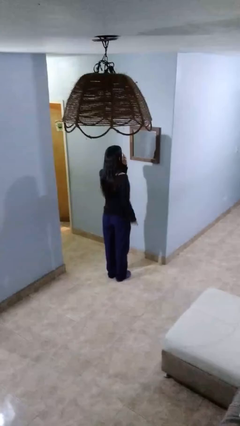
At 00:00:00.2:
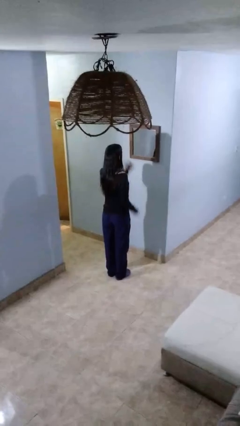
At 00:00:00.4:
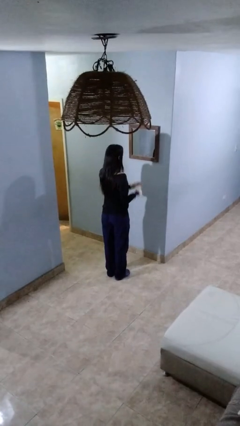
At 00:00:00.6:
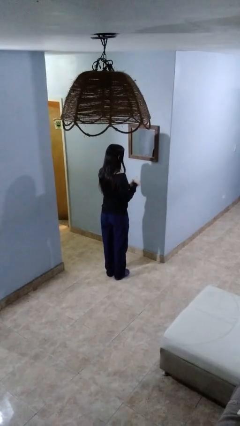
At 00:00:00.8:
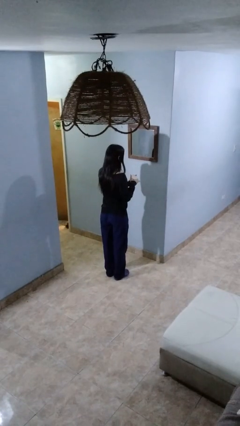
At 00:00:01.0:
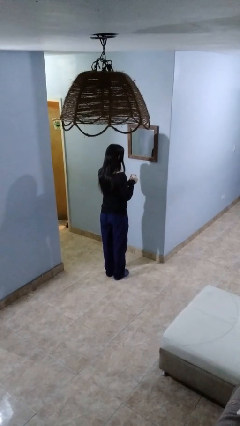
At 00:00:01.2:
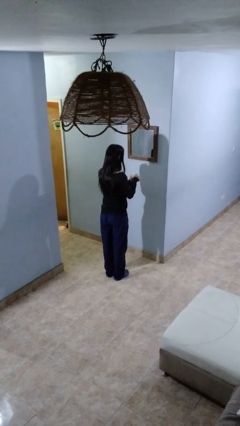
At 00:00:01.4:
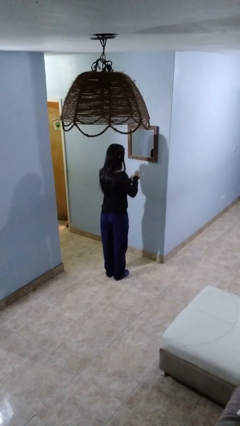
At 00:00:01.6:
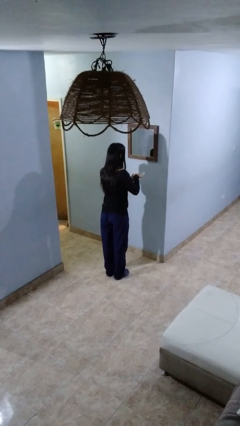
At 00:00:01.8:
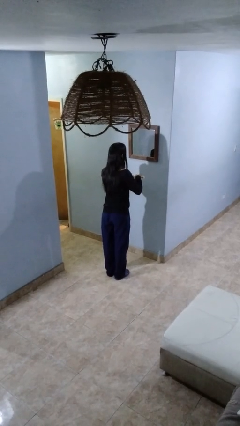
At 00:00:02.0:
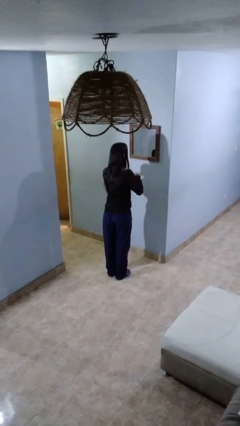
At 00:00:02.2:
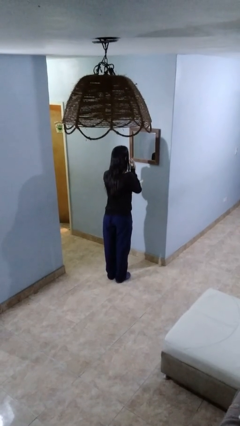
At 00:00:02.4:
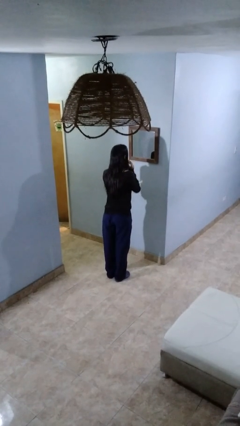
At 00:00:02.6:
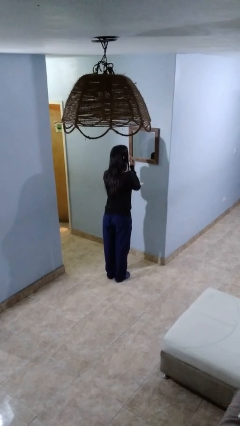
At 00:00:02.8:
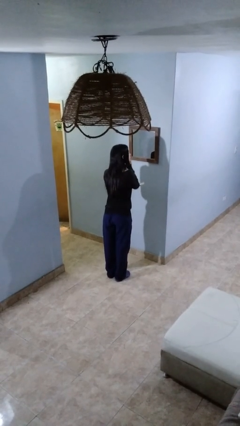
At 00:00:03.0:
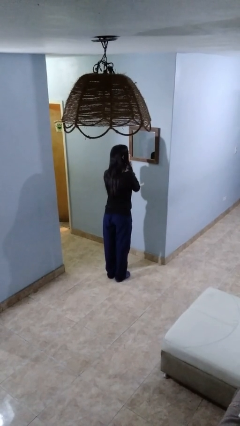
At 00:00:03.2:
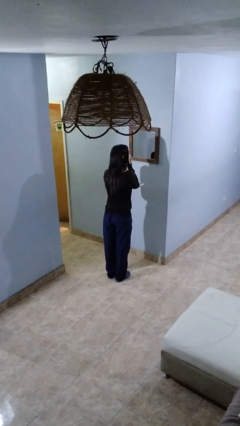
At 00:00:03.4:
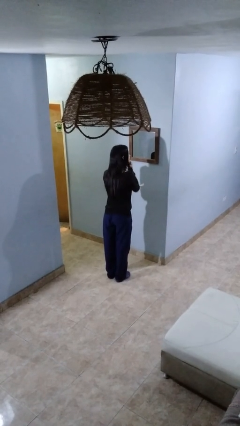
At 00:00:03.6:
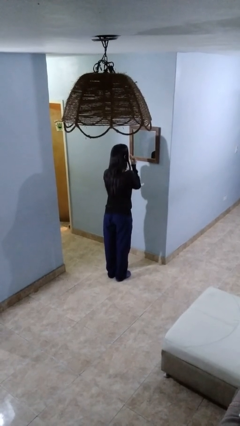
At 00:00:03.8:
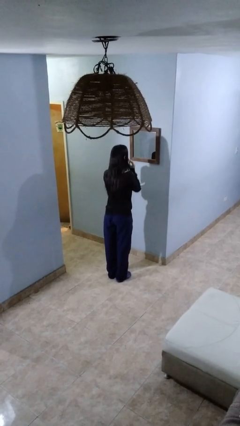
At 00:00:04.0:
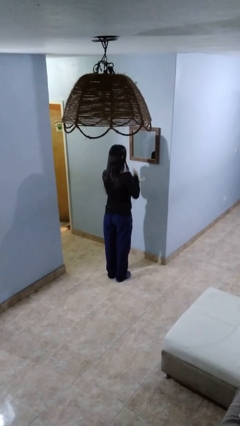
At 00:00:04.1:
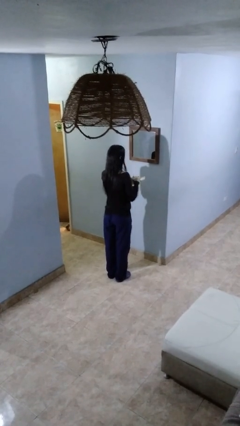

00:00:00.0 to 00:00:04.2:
person applies foundation makeup

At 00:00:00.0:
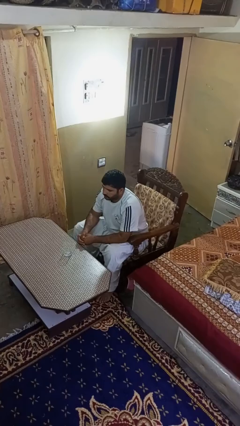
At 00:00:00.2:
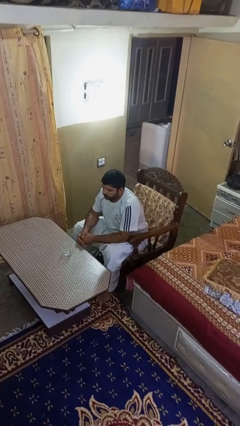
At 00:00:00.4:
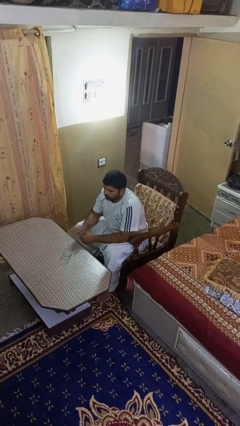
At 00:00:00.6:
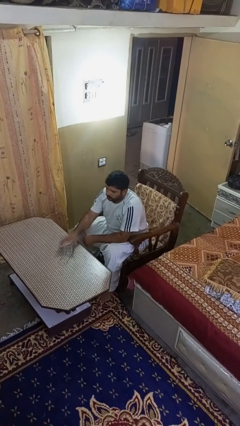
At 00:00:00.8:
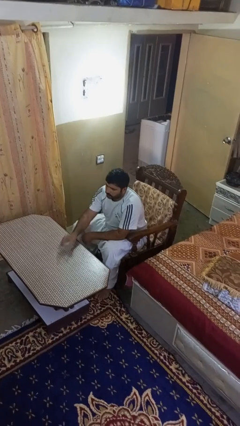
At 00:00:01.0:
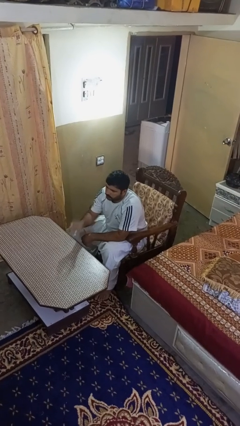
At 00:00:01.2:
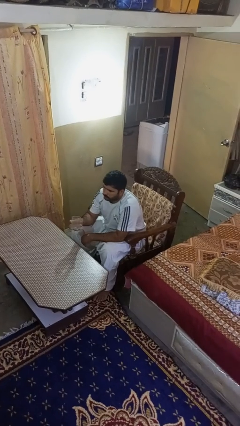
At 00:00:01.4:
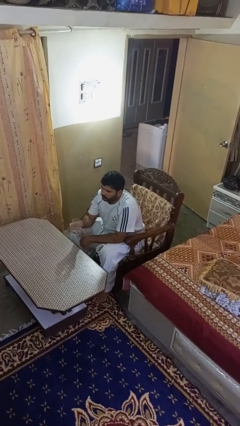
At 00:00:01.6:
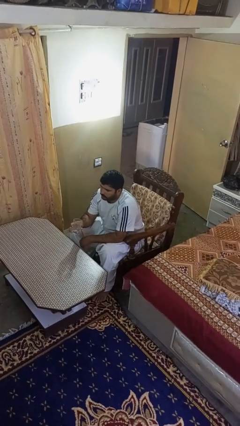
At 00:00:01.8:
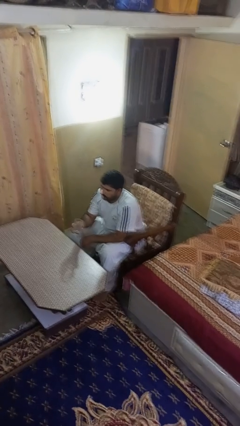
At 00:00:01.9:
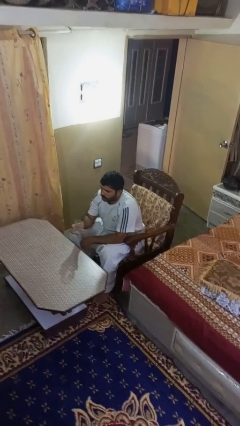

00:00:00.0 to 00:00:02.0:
person picks up object from table

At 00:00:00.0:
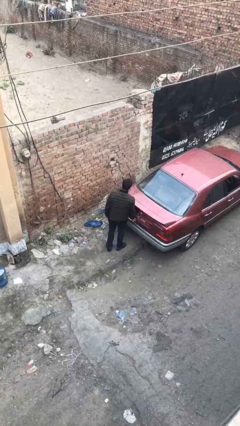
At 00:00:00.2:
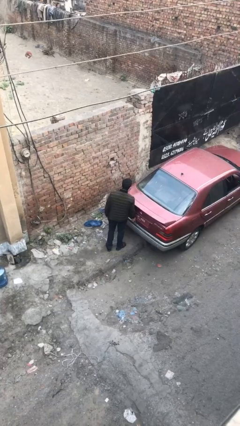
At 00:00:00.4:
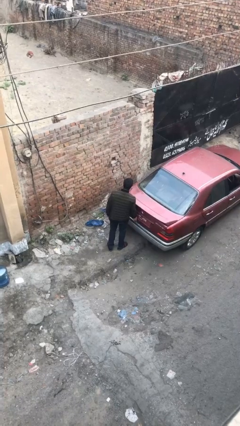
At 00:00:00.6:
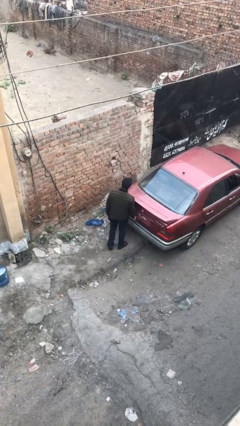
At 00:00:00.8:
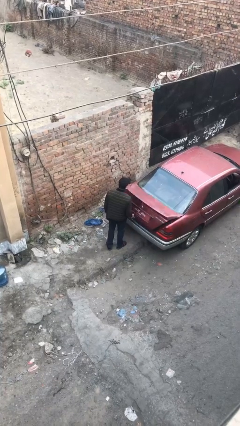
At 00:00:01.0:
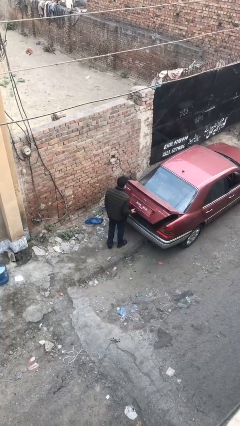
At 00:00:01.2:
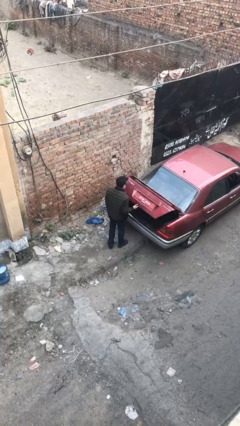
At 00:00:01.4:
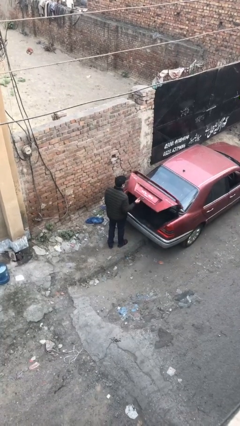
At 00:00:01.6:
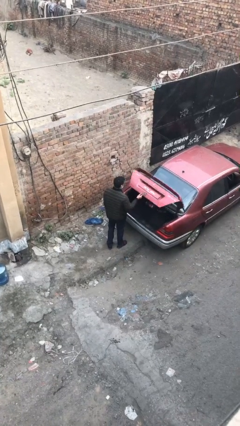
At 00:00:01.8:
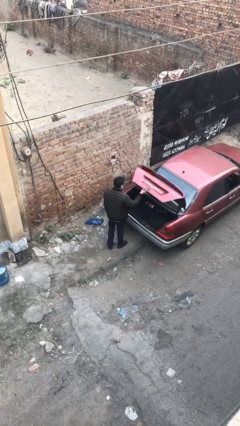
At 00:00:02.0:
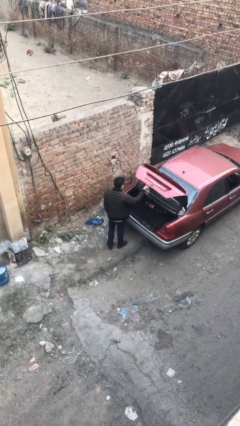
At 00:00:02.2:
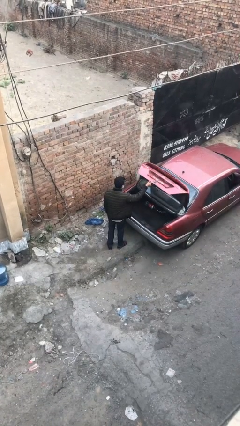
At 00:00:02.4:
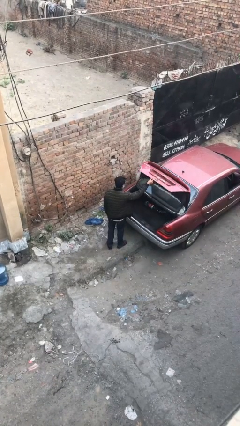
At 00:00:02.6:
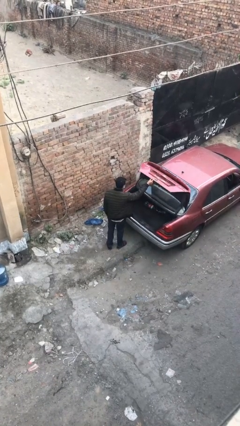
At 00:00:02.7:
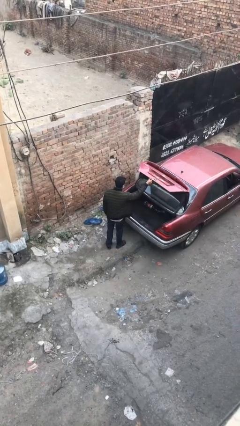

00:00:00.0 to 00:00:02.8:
person opens car trunk

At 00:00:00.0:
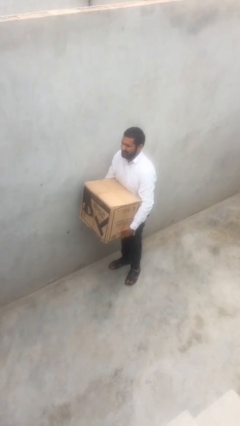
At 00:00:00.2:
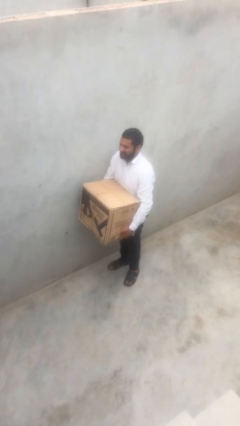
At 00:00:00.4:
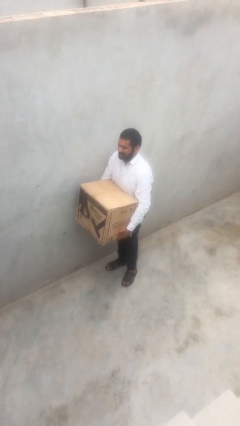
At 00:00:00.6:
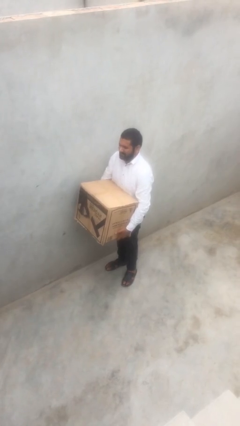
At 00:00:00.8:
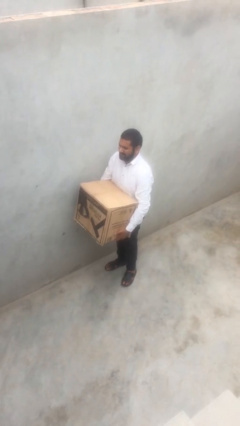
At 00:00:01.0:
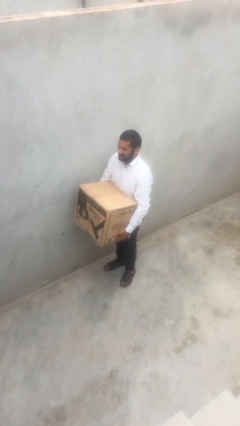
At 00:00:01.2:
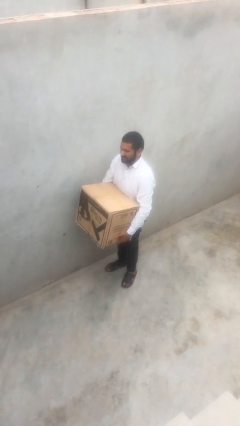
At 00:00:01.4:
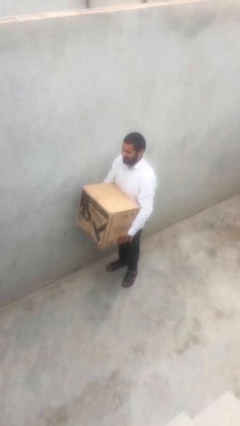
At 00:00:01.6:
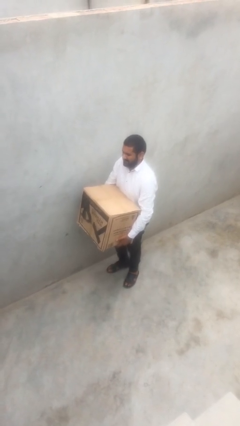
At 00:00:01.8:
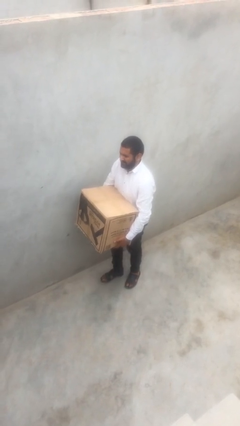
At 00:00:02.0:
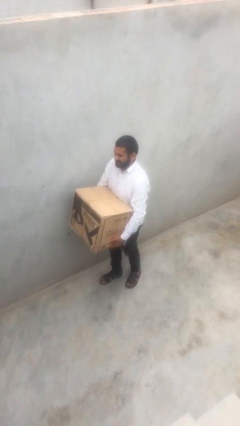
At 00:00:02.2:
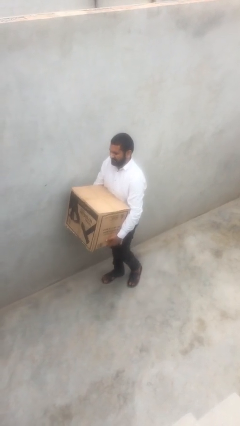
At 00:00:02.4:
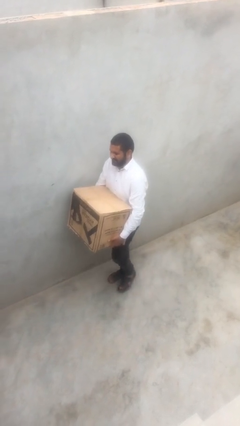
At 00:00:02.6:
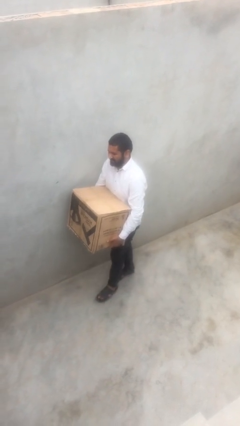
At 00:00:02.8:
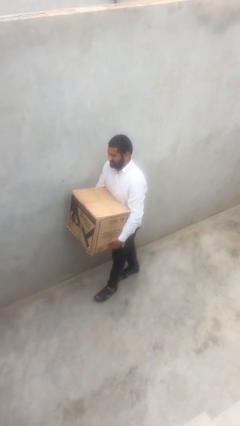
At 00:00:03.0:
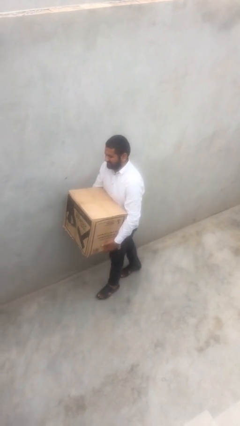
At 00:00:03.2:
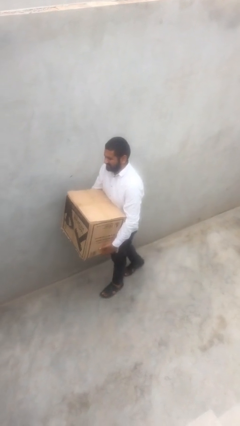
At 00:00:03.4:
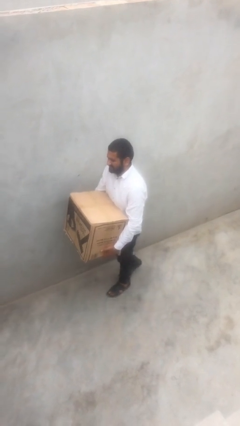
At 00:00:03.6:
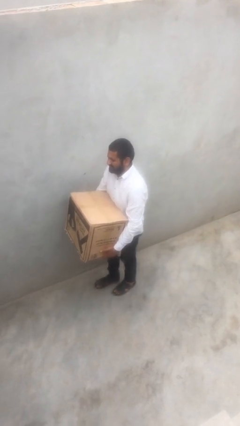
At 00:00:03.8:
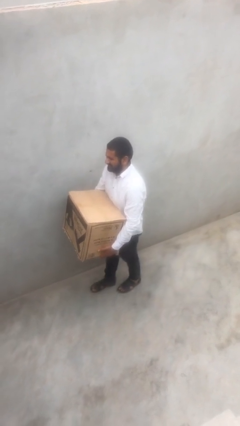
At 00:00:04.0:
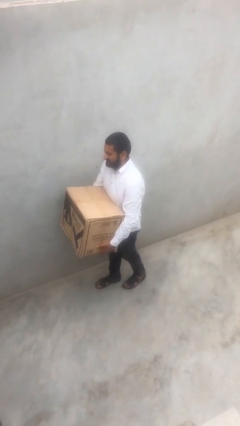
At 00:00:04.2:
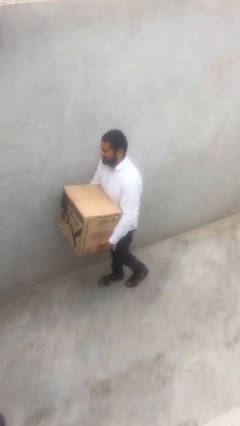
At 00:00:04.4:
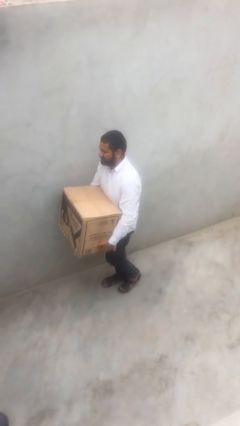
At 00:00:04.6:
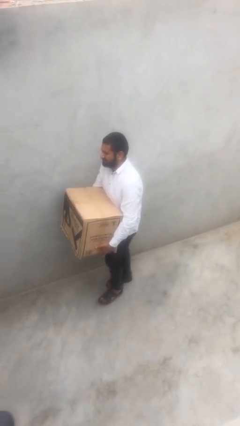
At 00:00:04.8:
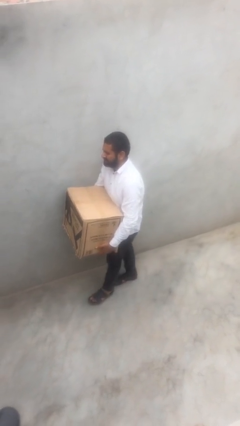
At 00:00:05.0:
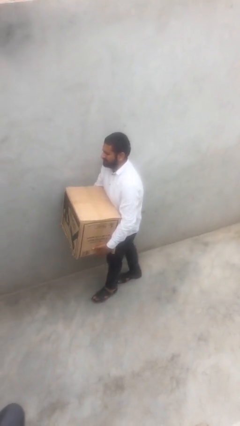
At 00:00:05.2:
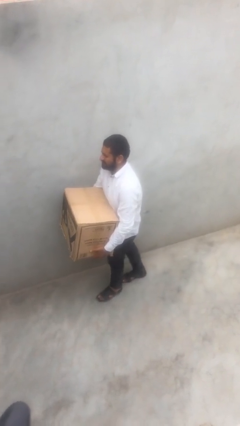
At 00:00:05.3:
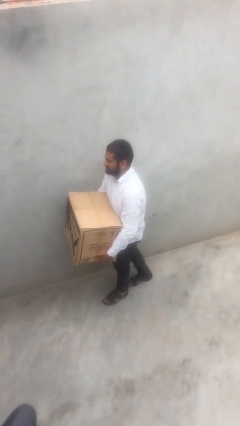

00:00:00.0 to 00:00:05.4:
person carries heavy object

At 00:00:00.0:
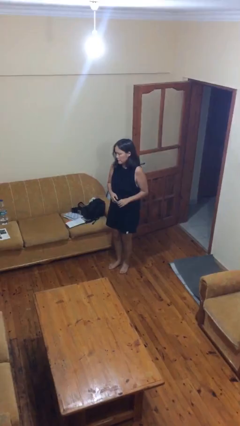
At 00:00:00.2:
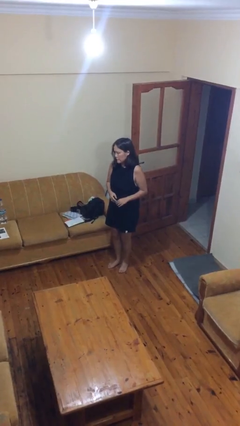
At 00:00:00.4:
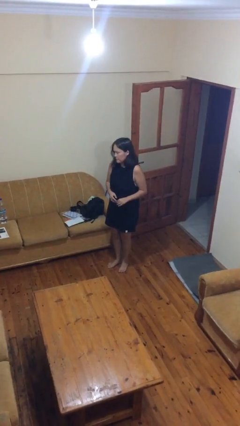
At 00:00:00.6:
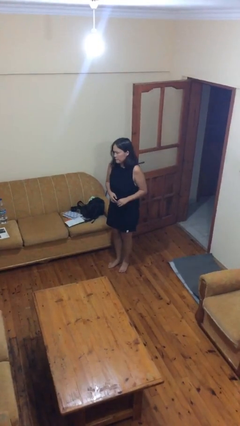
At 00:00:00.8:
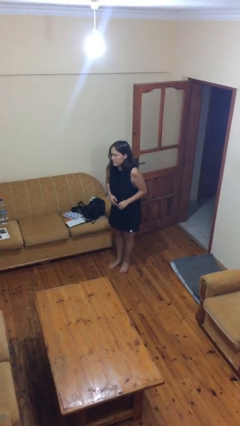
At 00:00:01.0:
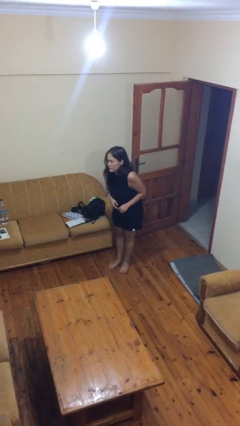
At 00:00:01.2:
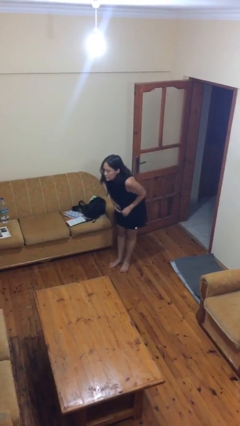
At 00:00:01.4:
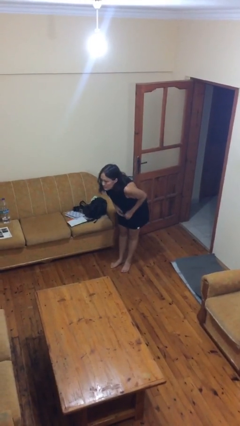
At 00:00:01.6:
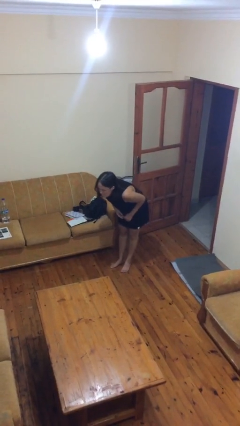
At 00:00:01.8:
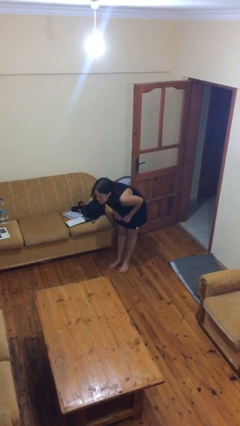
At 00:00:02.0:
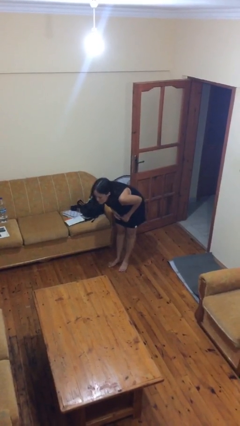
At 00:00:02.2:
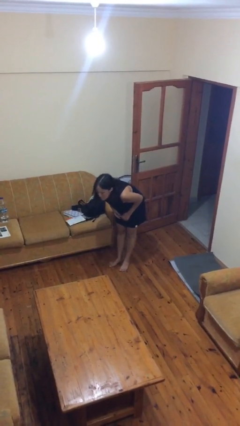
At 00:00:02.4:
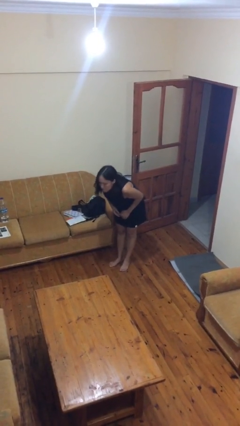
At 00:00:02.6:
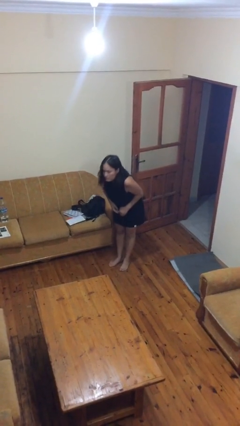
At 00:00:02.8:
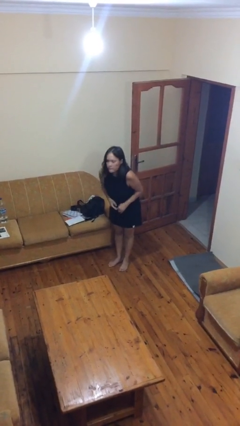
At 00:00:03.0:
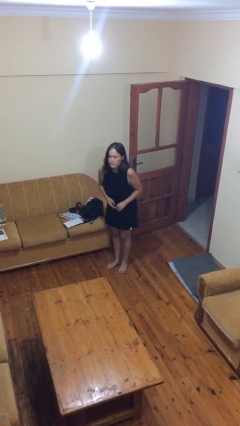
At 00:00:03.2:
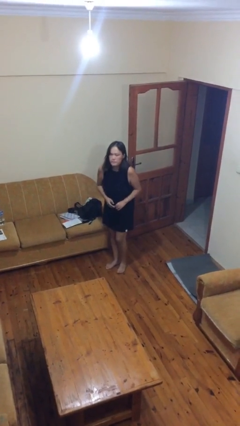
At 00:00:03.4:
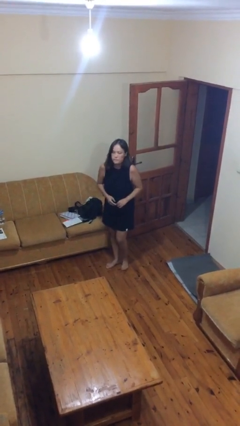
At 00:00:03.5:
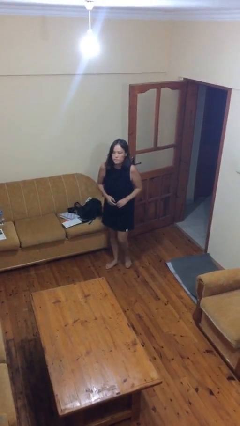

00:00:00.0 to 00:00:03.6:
person bows
